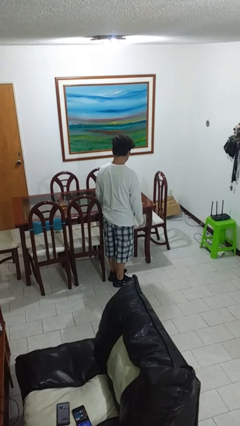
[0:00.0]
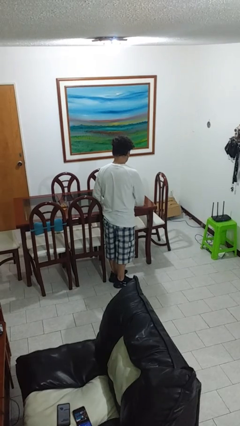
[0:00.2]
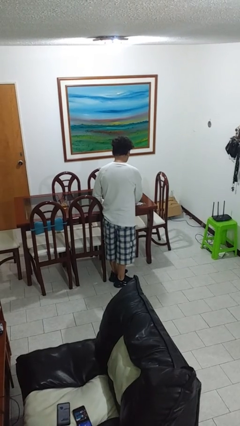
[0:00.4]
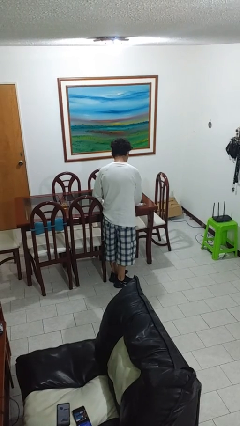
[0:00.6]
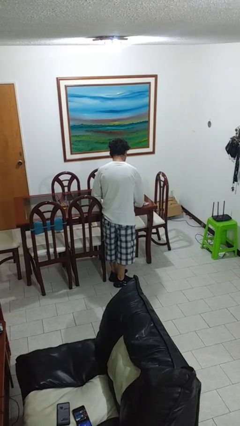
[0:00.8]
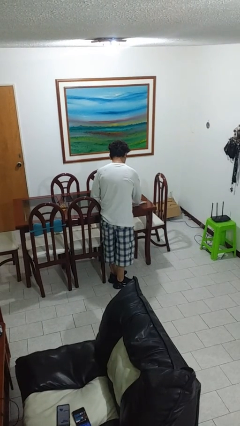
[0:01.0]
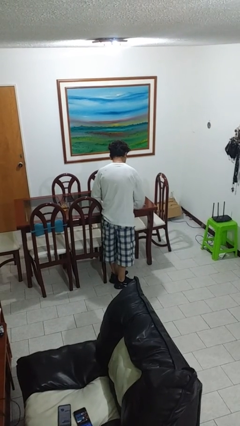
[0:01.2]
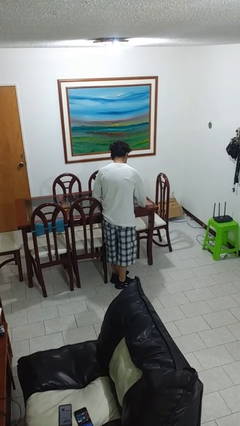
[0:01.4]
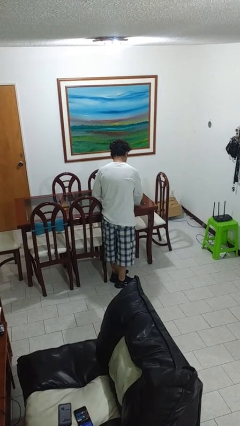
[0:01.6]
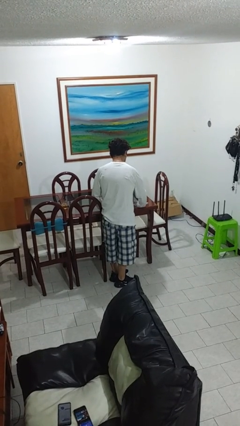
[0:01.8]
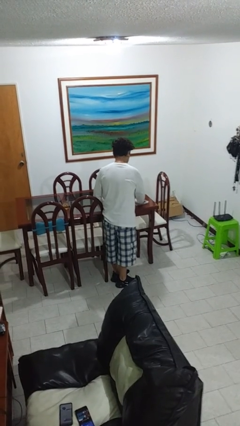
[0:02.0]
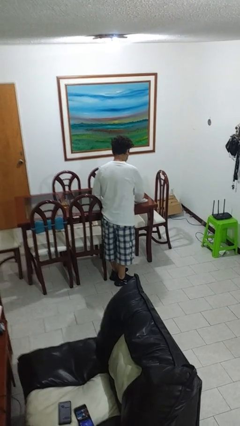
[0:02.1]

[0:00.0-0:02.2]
person cleans table with rag

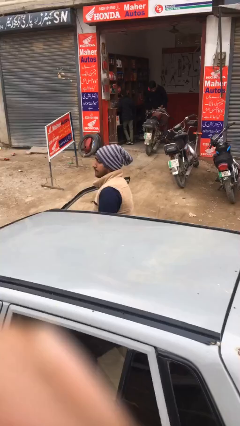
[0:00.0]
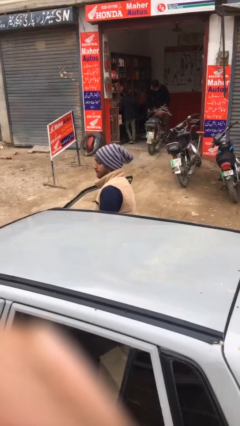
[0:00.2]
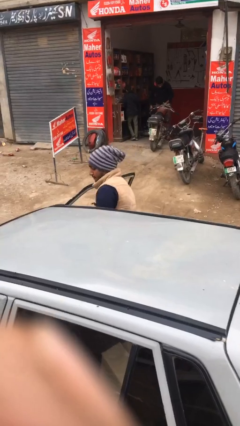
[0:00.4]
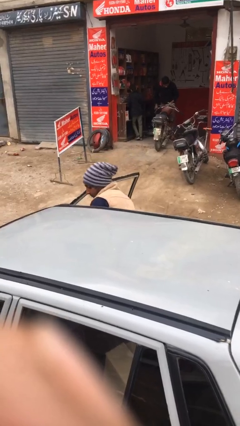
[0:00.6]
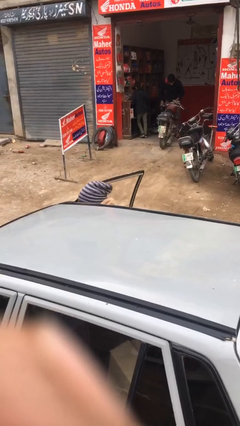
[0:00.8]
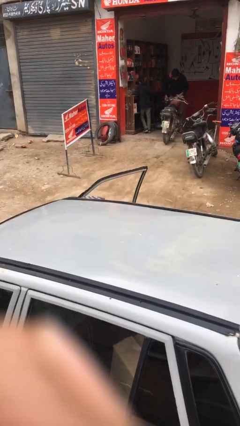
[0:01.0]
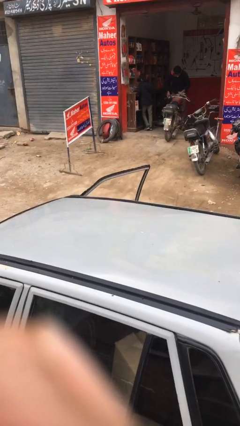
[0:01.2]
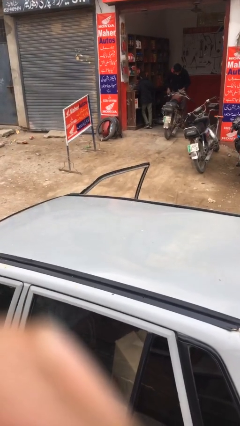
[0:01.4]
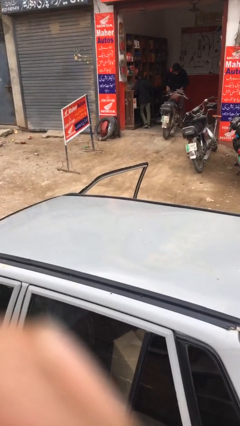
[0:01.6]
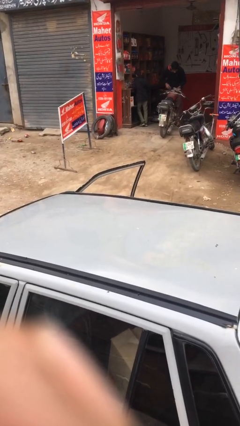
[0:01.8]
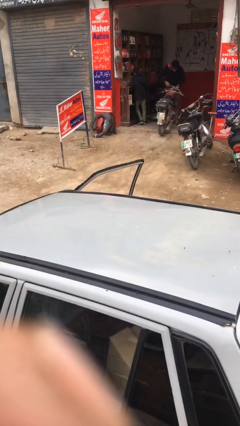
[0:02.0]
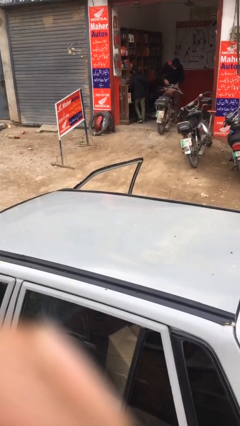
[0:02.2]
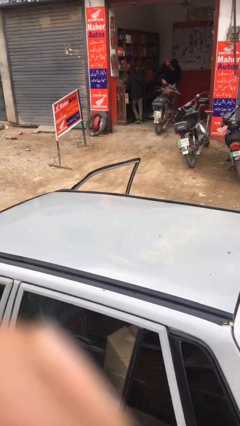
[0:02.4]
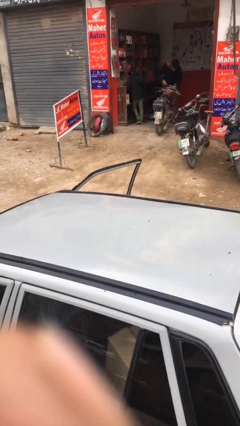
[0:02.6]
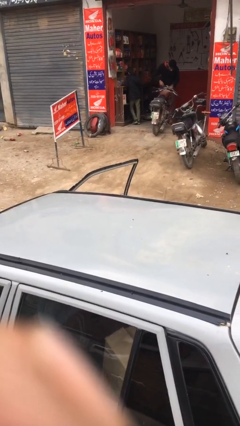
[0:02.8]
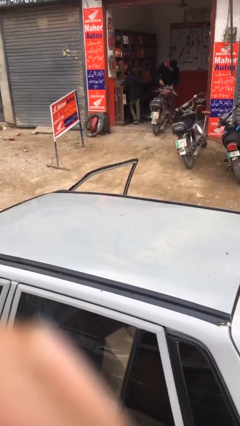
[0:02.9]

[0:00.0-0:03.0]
person enters car

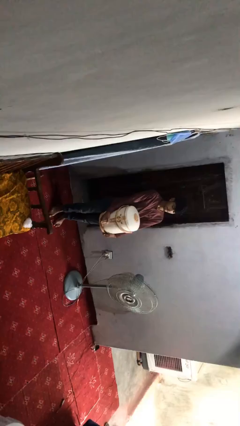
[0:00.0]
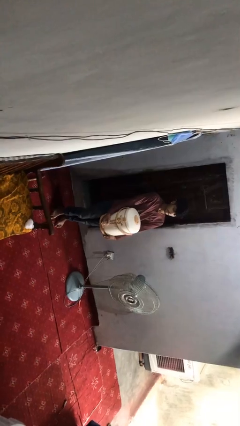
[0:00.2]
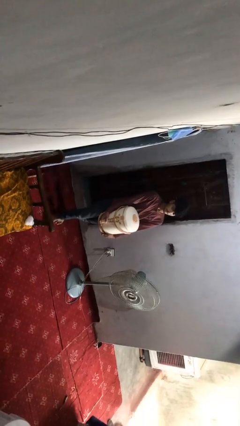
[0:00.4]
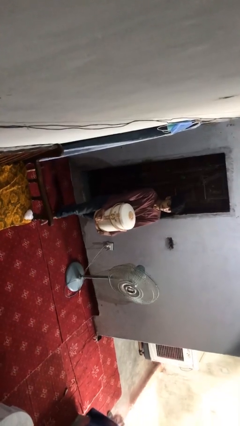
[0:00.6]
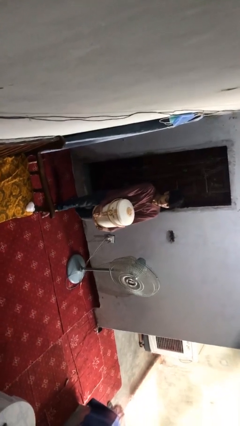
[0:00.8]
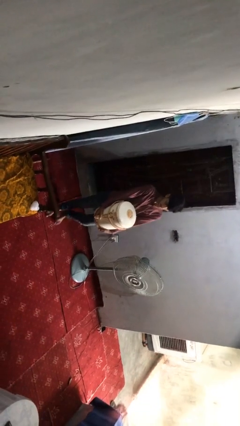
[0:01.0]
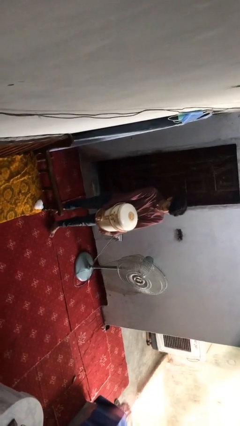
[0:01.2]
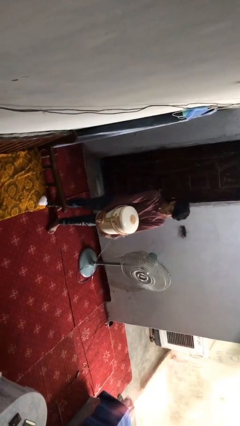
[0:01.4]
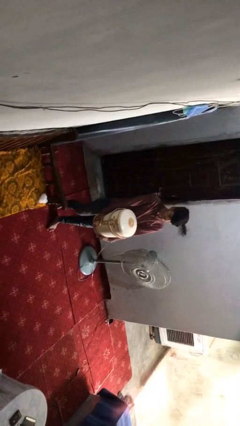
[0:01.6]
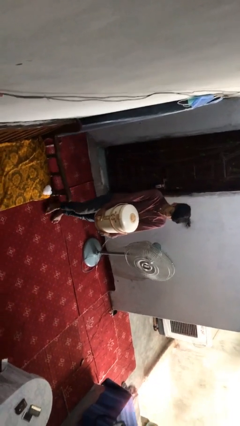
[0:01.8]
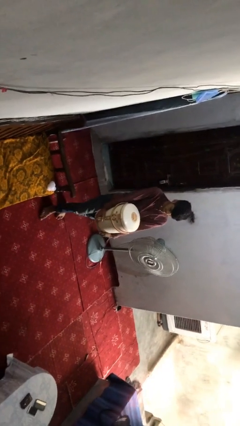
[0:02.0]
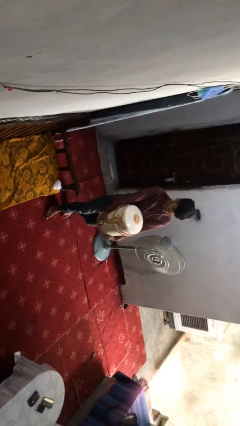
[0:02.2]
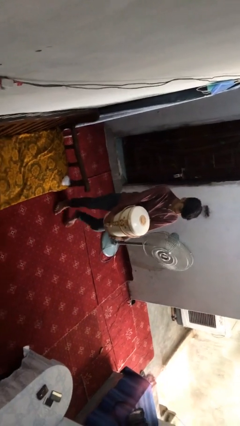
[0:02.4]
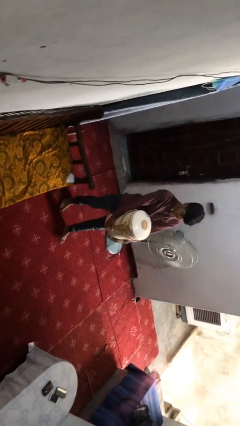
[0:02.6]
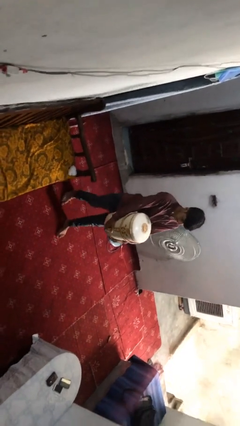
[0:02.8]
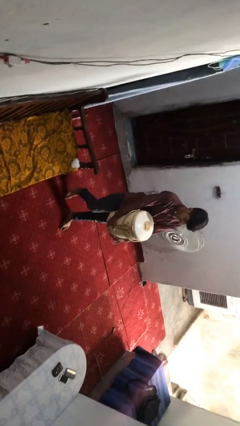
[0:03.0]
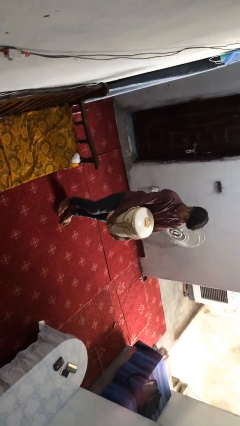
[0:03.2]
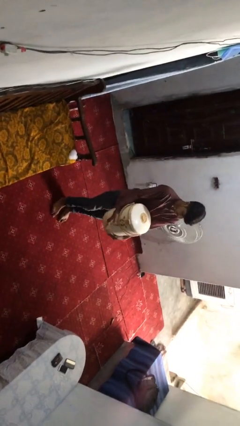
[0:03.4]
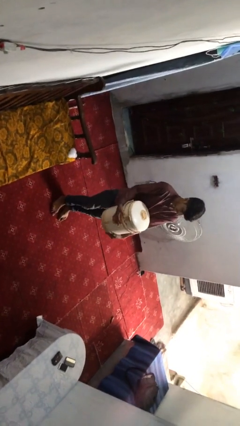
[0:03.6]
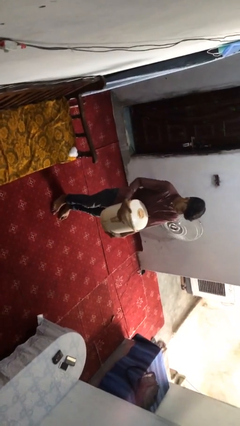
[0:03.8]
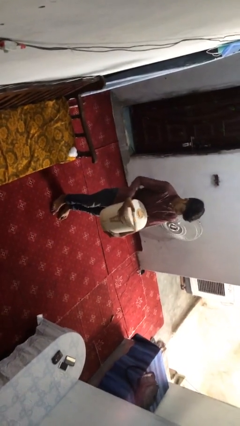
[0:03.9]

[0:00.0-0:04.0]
person carries heavy object

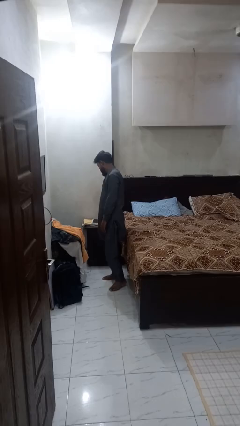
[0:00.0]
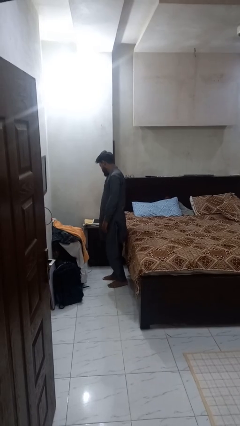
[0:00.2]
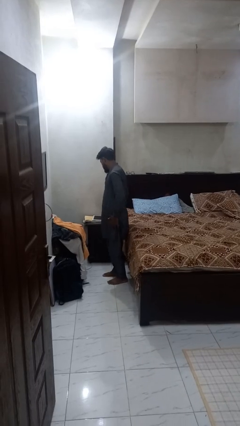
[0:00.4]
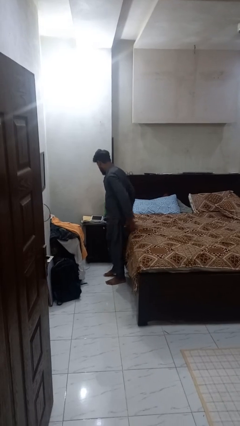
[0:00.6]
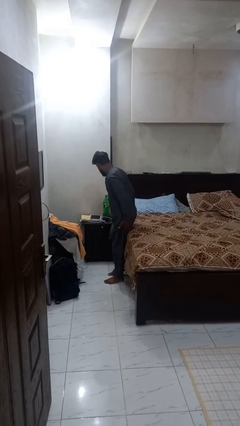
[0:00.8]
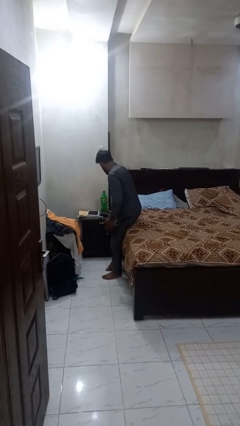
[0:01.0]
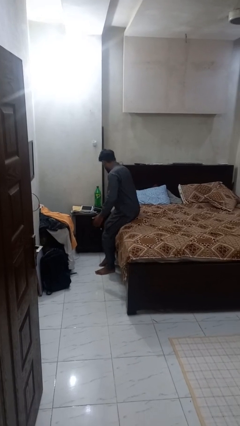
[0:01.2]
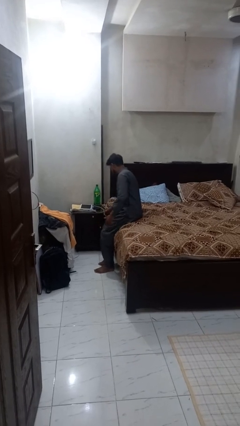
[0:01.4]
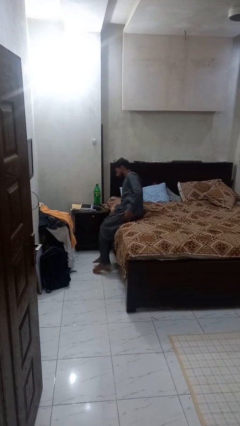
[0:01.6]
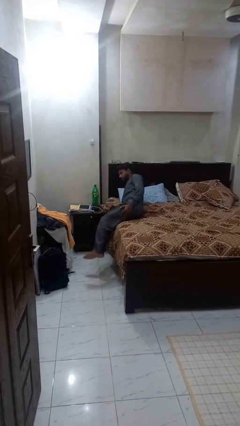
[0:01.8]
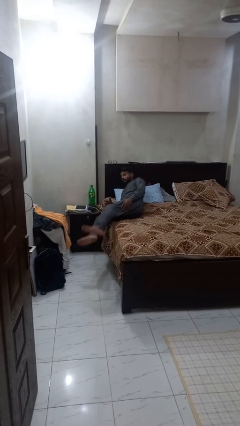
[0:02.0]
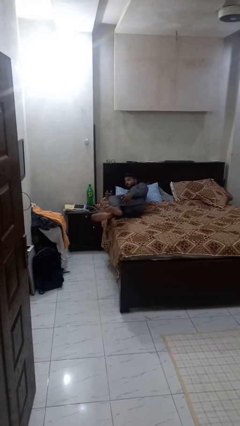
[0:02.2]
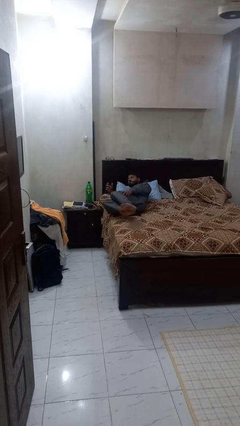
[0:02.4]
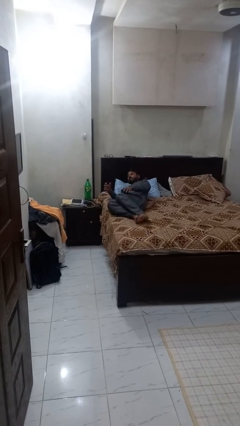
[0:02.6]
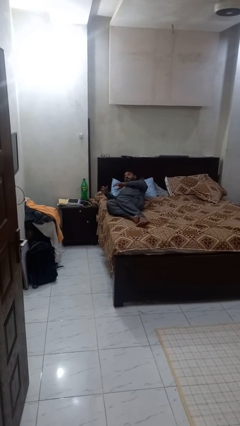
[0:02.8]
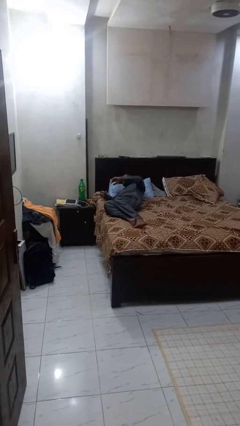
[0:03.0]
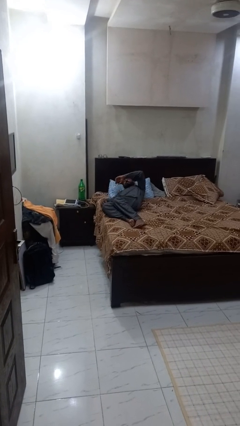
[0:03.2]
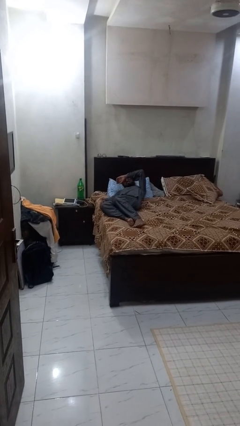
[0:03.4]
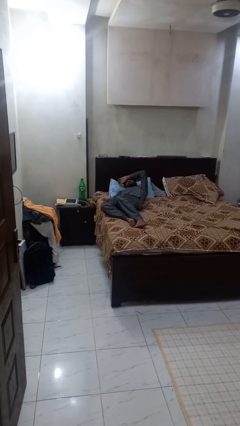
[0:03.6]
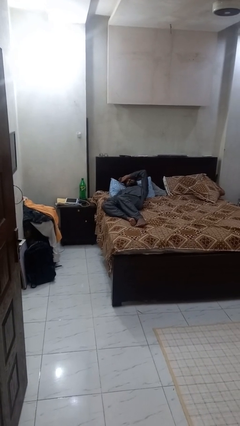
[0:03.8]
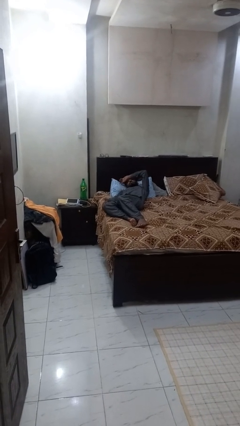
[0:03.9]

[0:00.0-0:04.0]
person lies down on bed

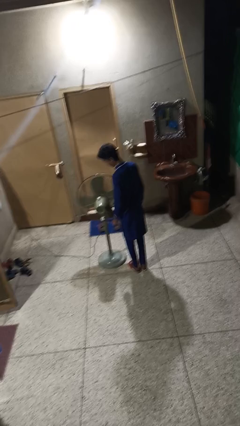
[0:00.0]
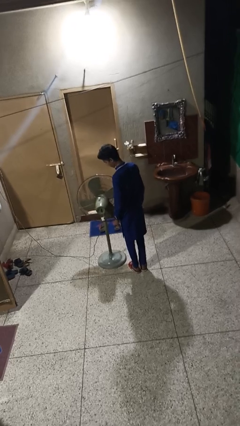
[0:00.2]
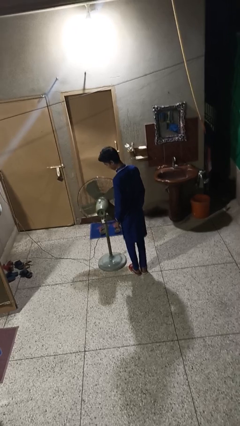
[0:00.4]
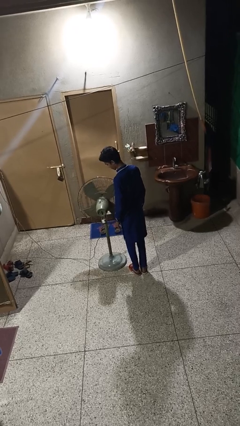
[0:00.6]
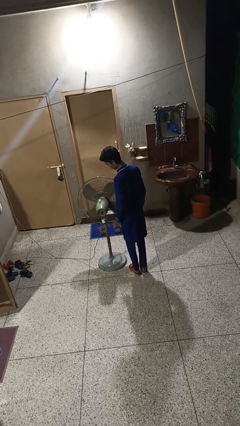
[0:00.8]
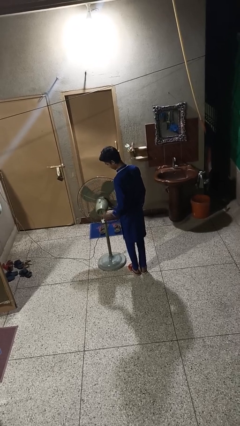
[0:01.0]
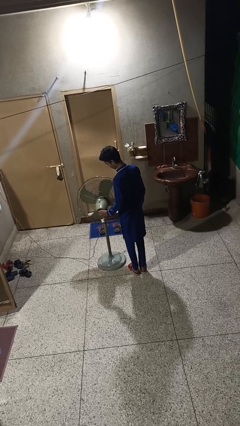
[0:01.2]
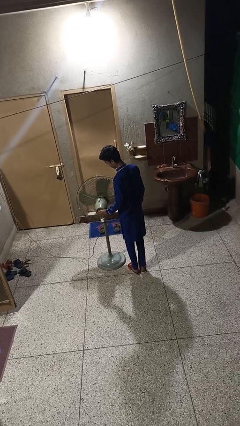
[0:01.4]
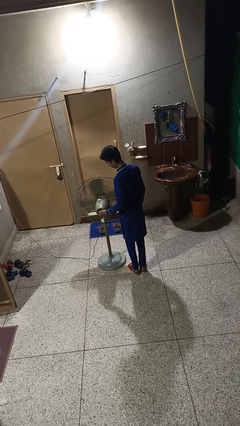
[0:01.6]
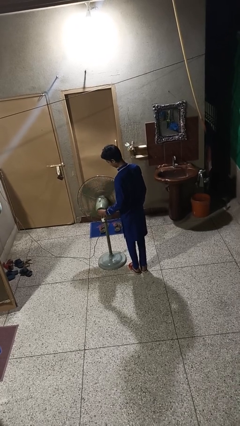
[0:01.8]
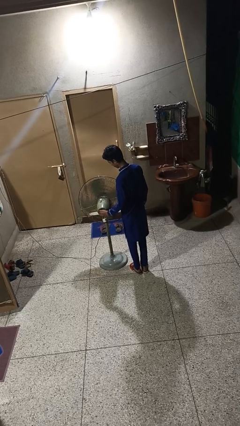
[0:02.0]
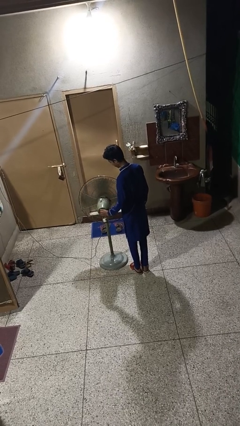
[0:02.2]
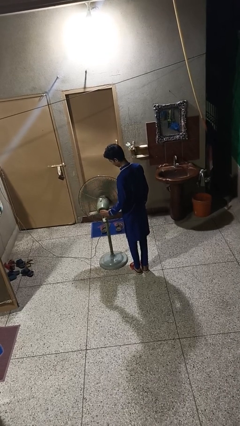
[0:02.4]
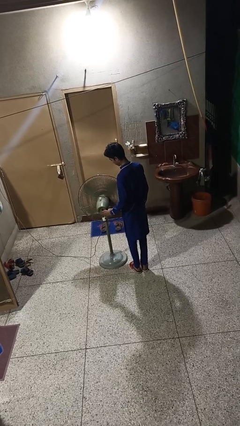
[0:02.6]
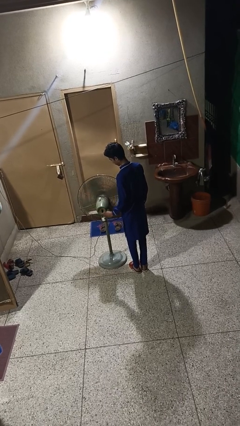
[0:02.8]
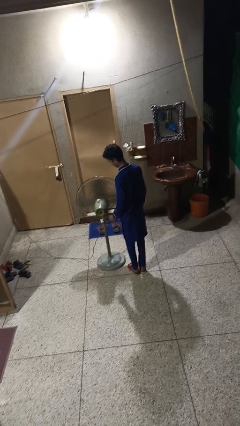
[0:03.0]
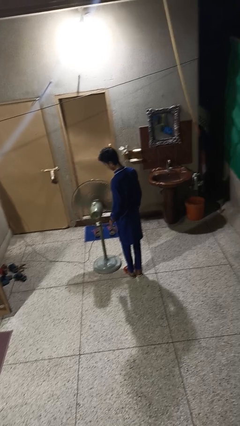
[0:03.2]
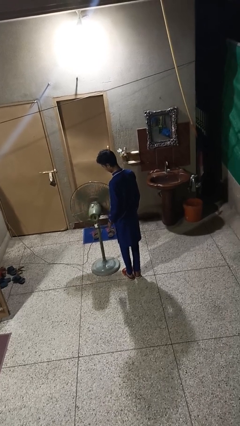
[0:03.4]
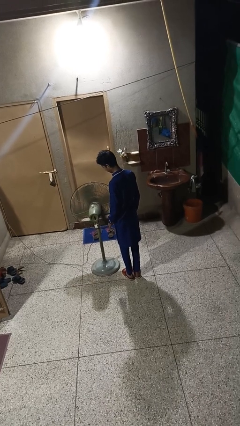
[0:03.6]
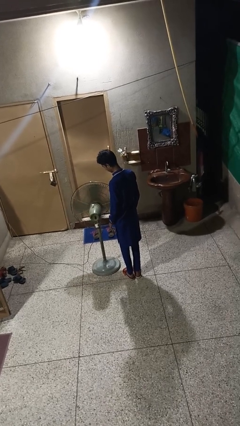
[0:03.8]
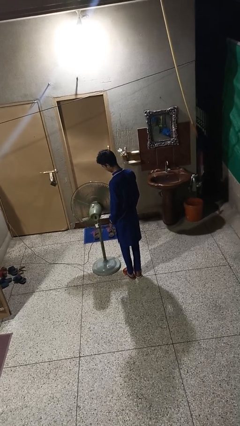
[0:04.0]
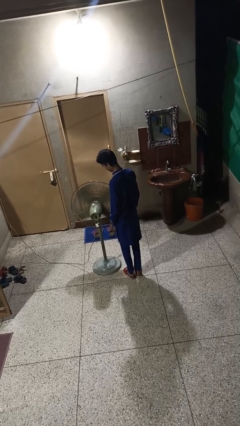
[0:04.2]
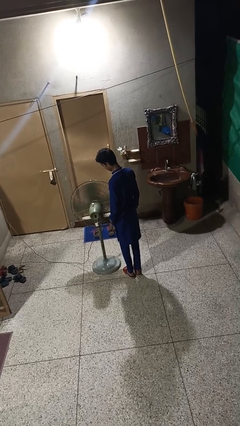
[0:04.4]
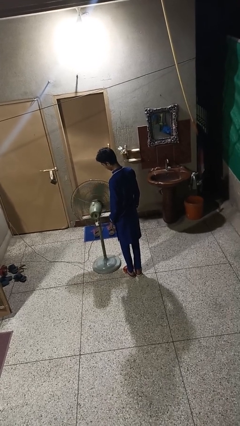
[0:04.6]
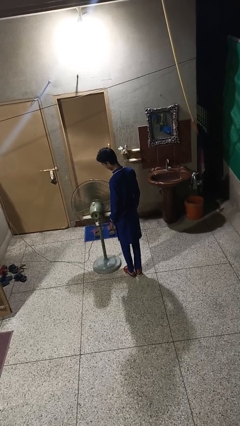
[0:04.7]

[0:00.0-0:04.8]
person turns on fan
